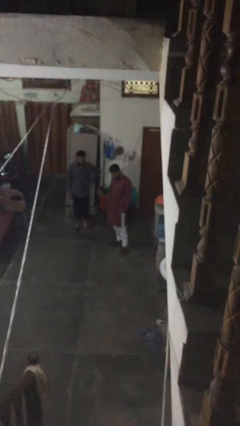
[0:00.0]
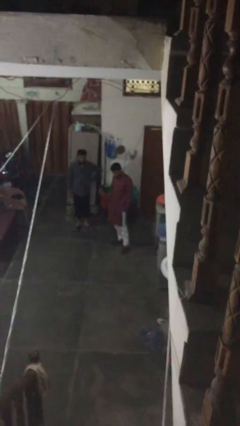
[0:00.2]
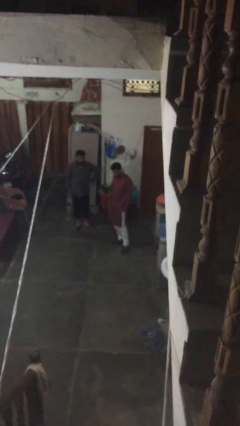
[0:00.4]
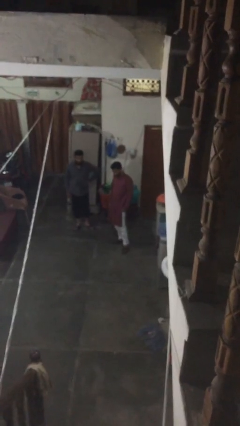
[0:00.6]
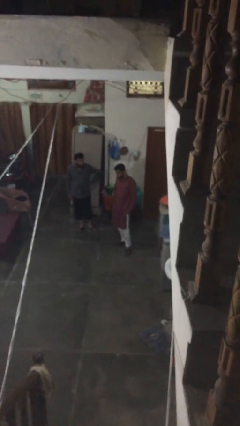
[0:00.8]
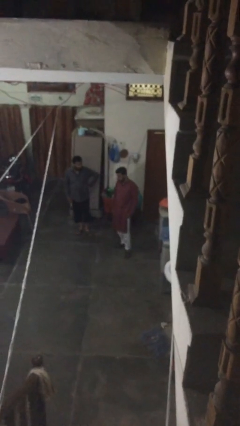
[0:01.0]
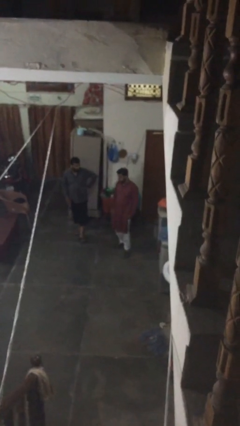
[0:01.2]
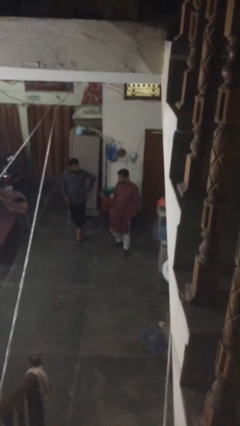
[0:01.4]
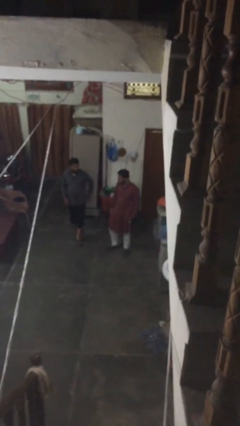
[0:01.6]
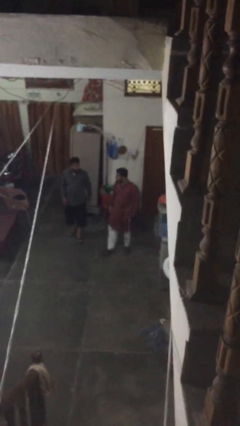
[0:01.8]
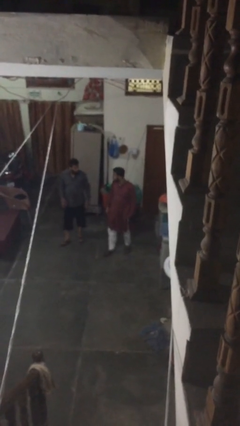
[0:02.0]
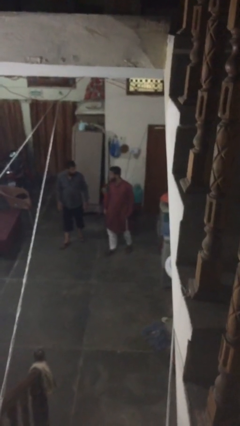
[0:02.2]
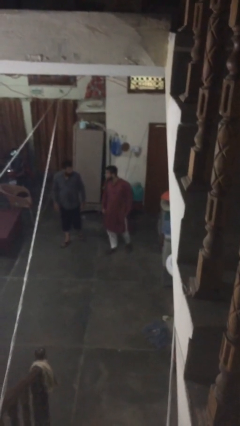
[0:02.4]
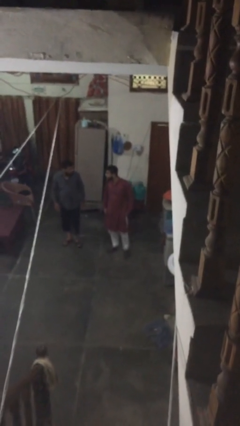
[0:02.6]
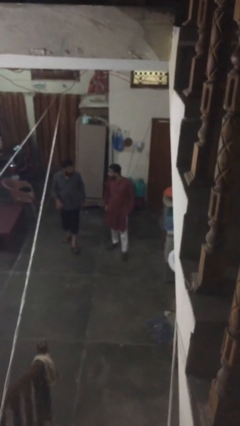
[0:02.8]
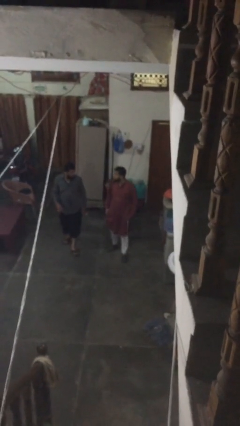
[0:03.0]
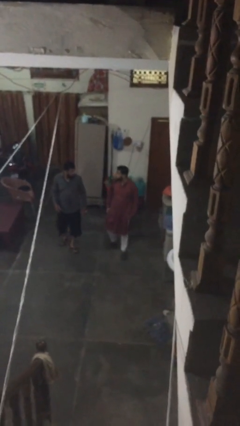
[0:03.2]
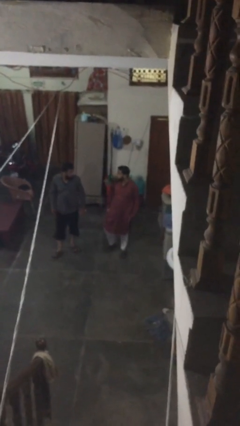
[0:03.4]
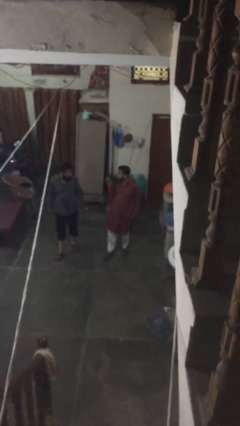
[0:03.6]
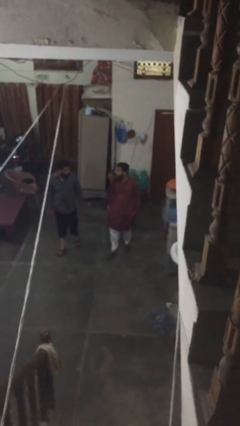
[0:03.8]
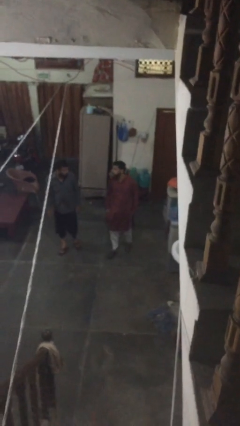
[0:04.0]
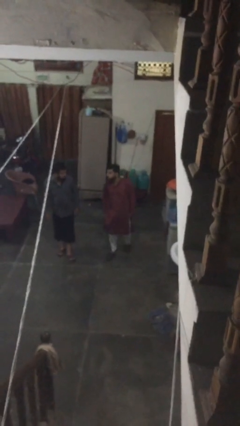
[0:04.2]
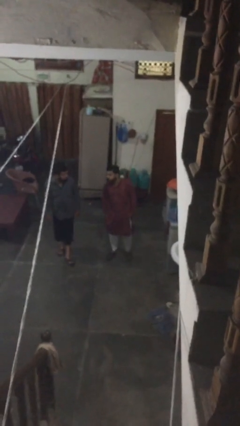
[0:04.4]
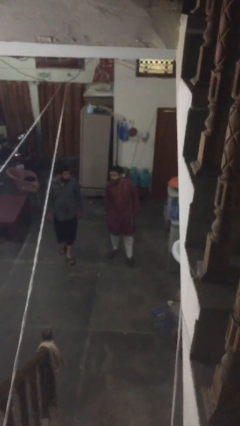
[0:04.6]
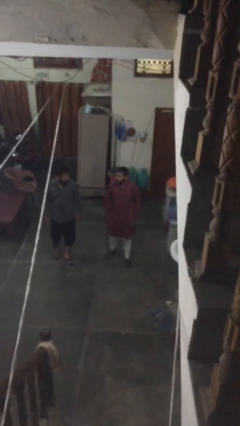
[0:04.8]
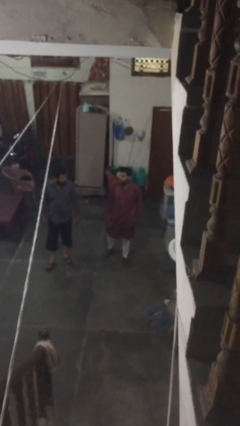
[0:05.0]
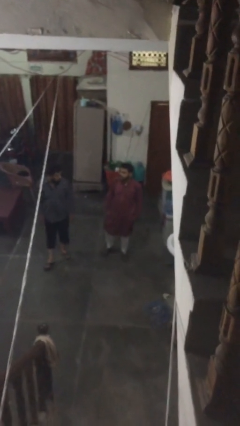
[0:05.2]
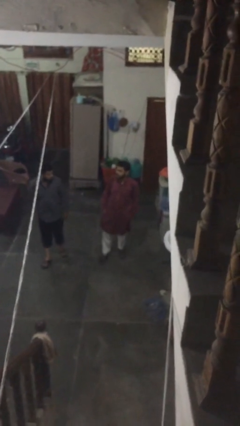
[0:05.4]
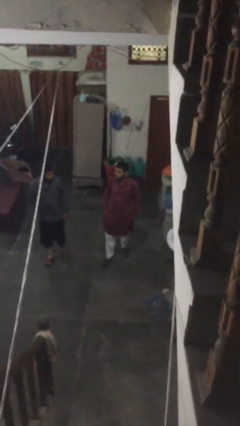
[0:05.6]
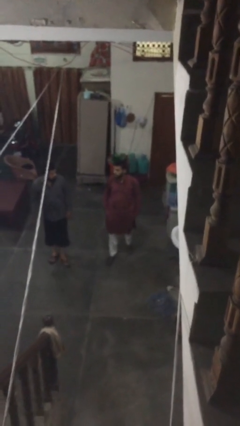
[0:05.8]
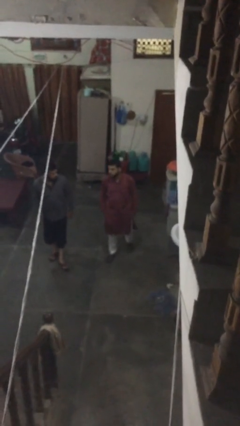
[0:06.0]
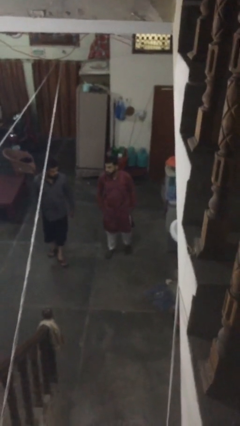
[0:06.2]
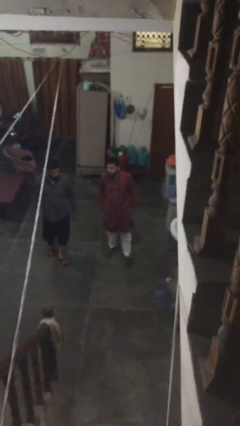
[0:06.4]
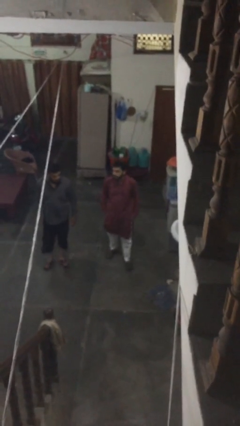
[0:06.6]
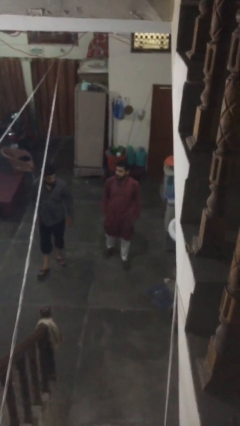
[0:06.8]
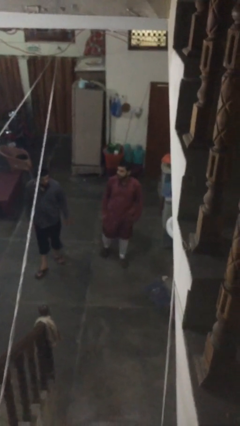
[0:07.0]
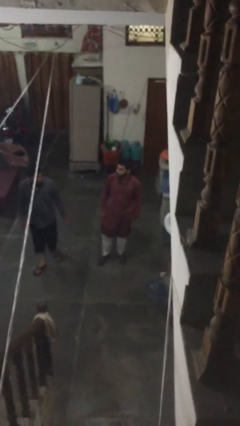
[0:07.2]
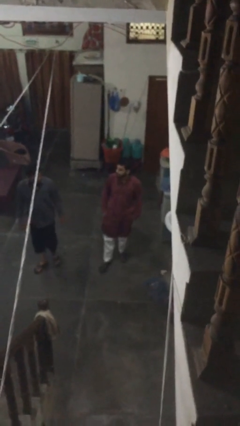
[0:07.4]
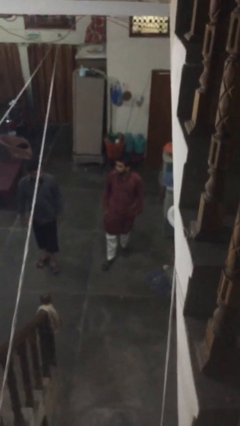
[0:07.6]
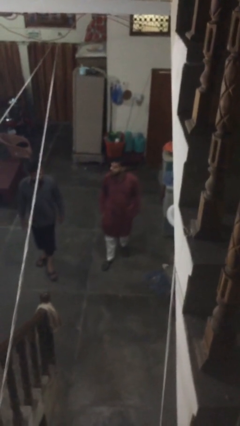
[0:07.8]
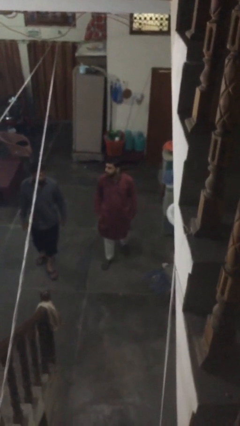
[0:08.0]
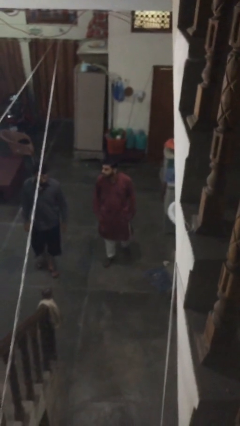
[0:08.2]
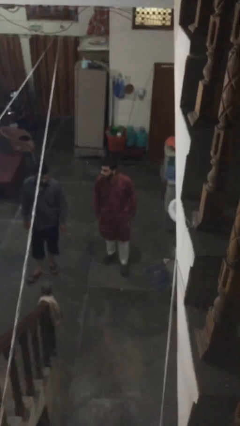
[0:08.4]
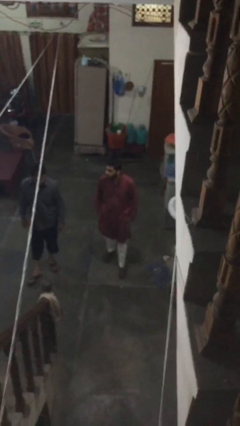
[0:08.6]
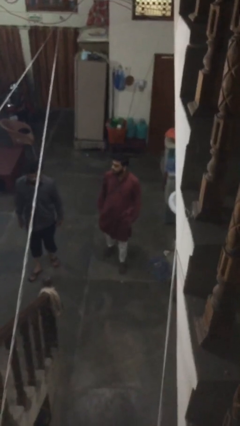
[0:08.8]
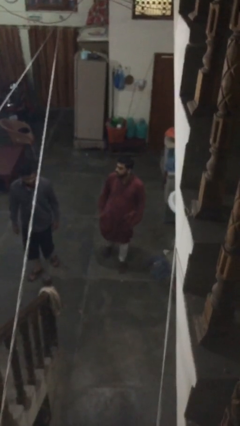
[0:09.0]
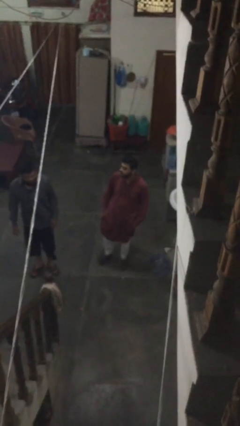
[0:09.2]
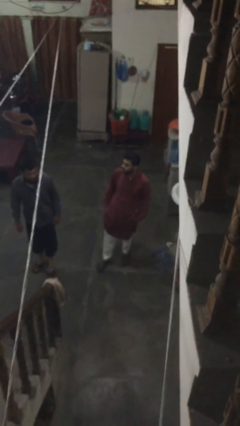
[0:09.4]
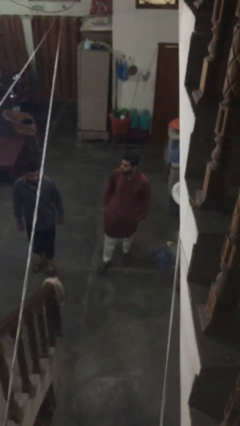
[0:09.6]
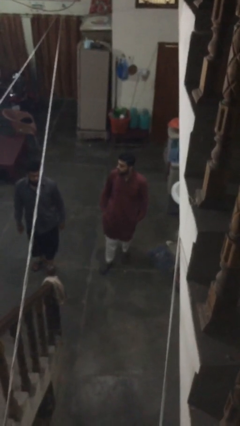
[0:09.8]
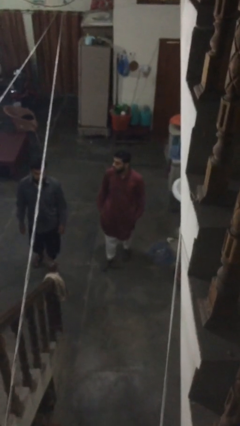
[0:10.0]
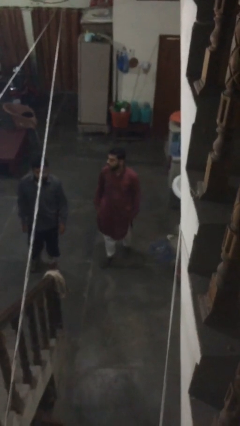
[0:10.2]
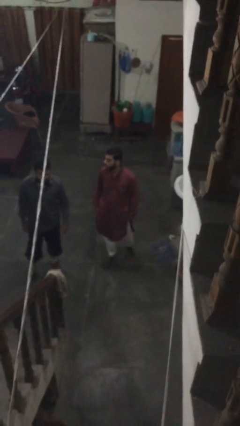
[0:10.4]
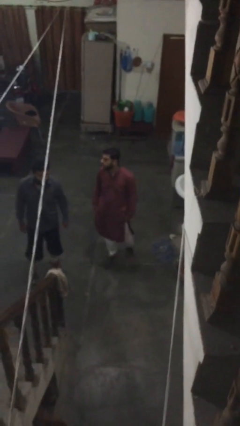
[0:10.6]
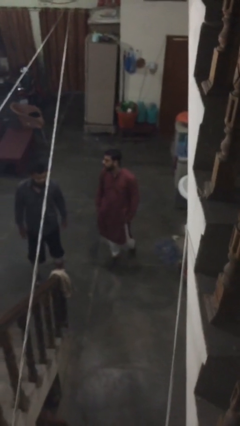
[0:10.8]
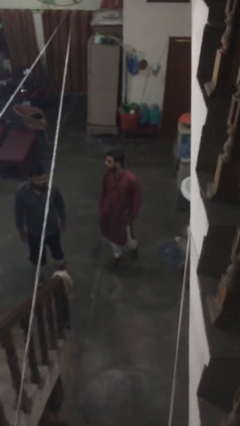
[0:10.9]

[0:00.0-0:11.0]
person talks to person

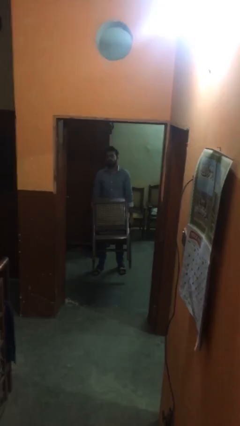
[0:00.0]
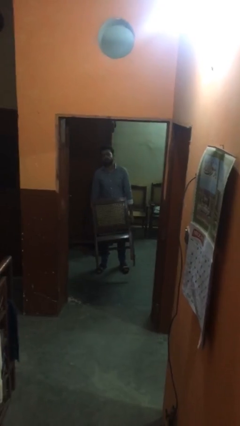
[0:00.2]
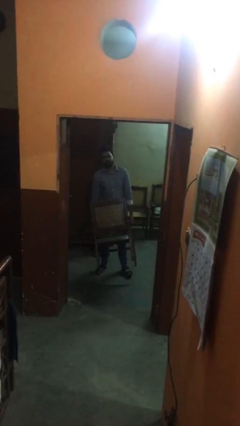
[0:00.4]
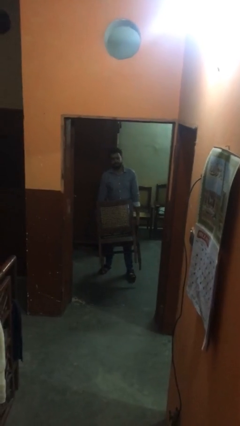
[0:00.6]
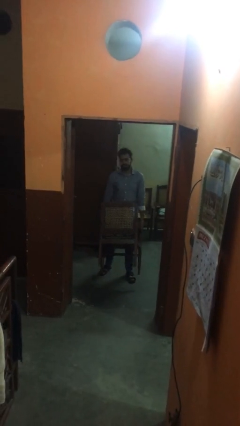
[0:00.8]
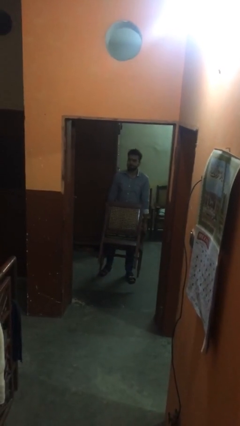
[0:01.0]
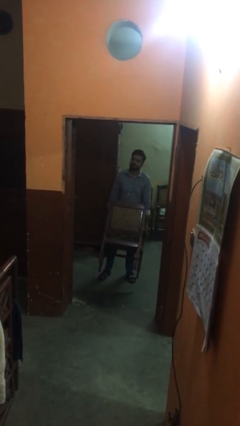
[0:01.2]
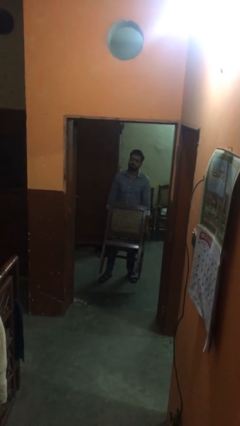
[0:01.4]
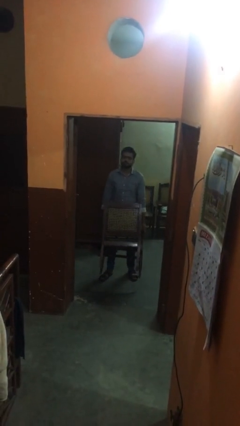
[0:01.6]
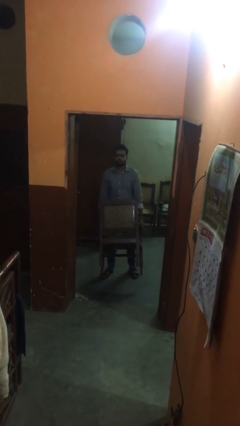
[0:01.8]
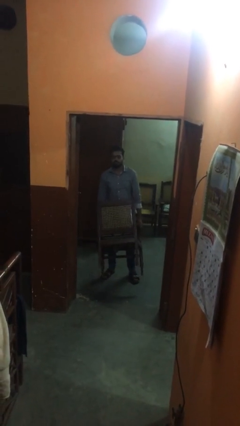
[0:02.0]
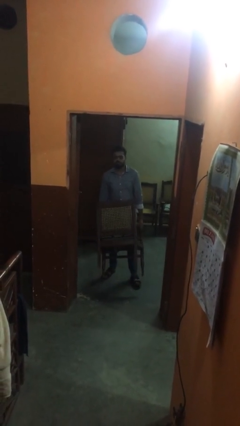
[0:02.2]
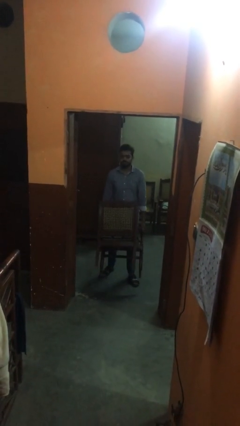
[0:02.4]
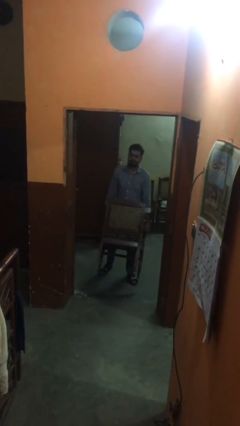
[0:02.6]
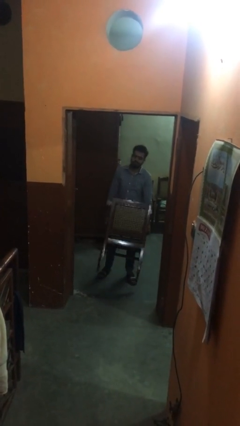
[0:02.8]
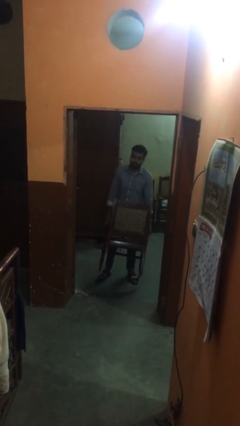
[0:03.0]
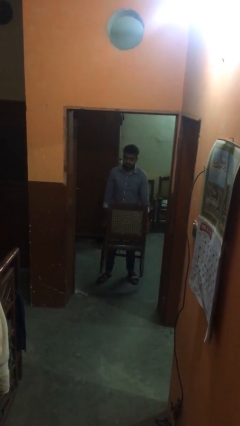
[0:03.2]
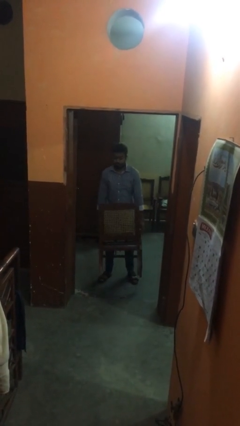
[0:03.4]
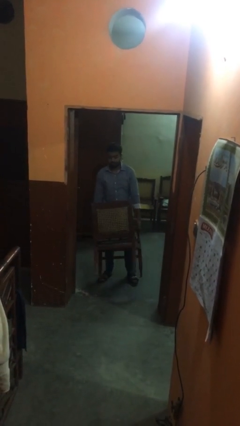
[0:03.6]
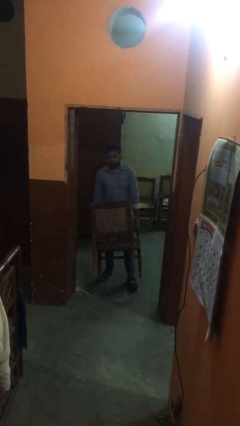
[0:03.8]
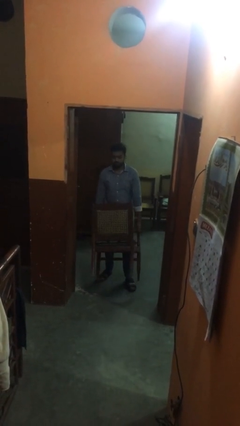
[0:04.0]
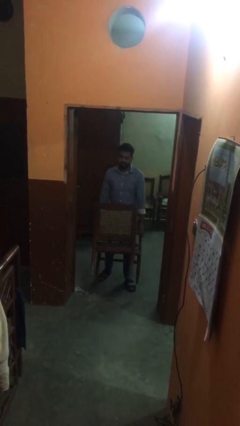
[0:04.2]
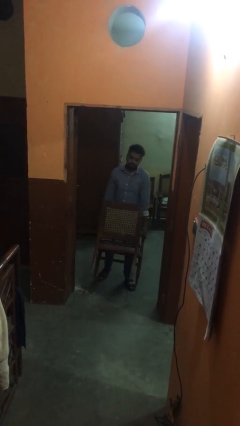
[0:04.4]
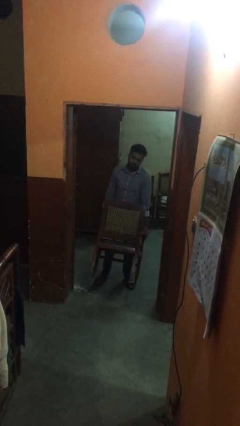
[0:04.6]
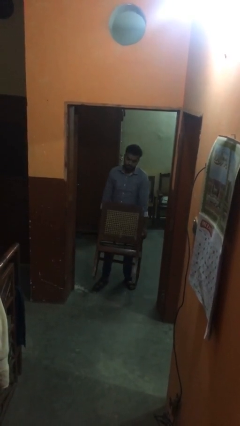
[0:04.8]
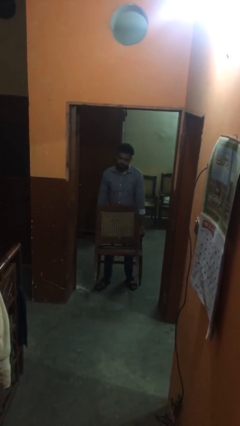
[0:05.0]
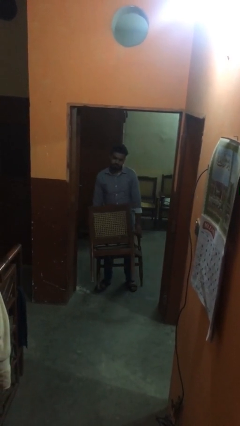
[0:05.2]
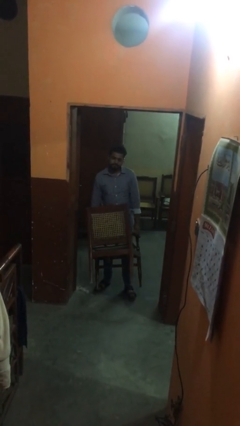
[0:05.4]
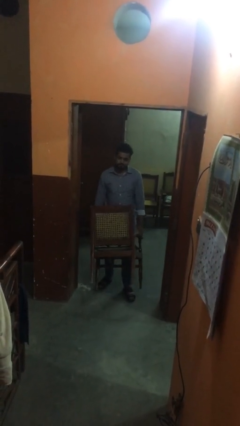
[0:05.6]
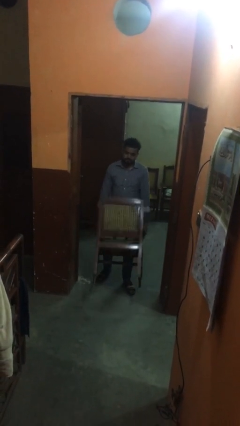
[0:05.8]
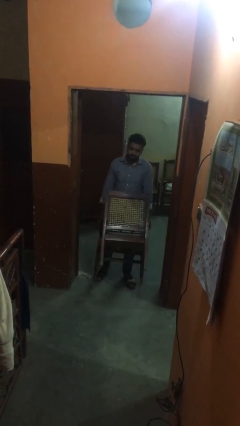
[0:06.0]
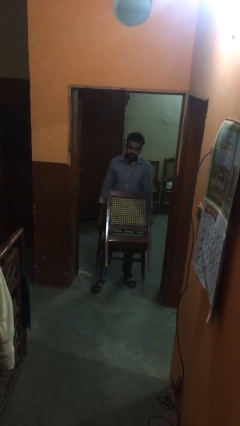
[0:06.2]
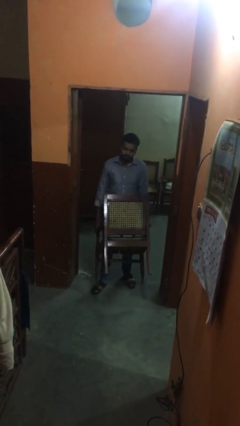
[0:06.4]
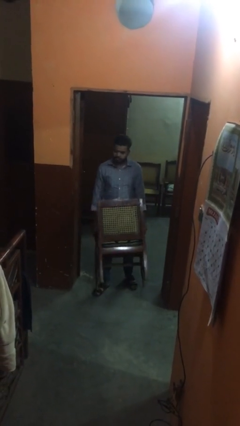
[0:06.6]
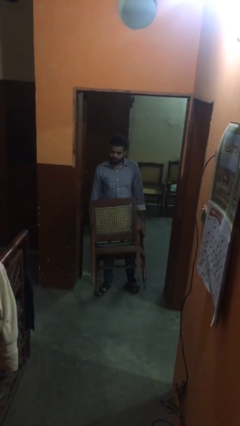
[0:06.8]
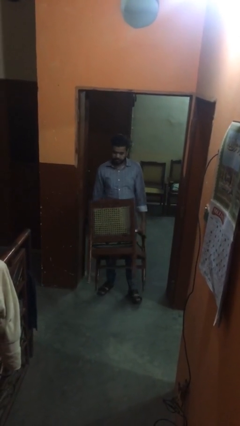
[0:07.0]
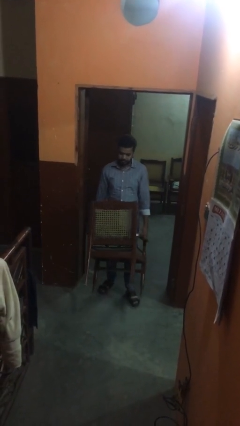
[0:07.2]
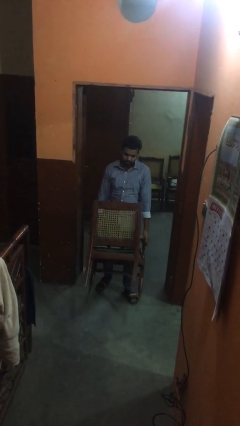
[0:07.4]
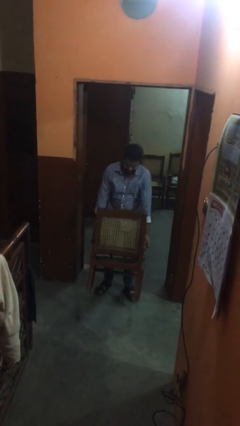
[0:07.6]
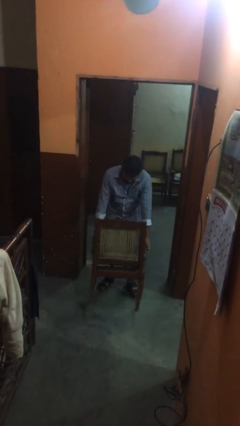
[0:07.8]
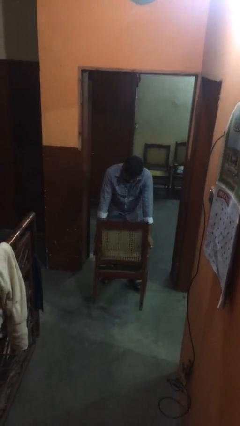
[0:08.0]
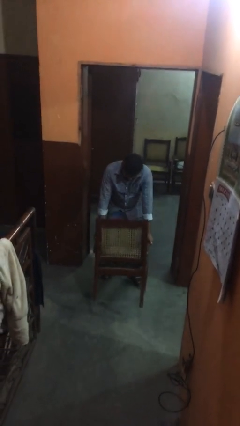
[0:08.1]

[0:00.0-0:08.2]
person carries heavy object
